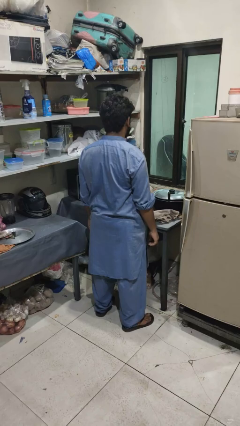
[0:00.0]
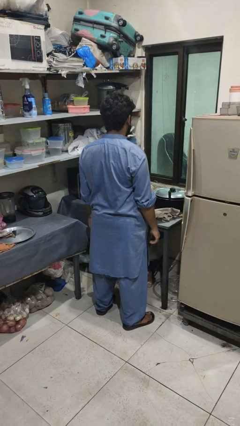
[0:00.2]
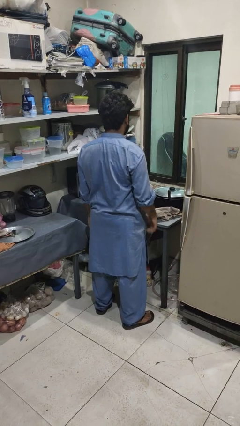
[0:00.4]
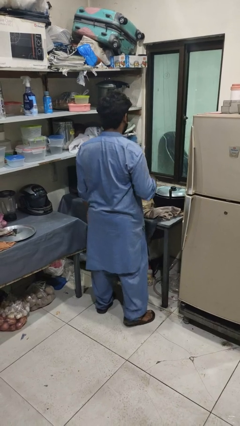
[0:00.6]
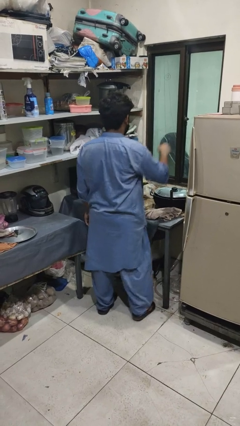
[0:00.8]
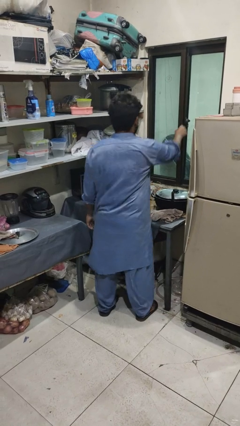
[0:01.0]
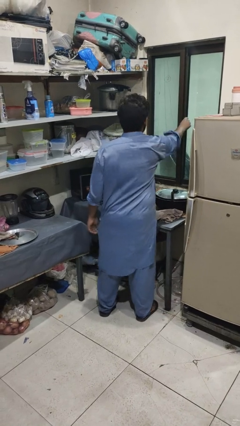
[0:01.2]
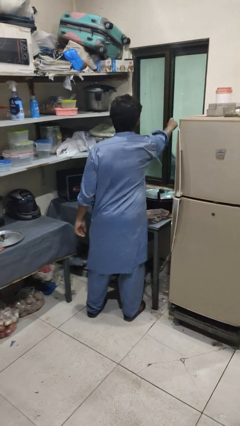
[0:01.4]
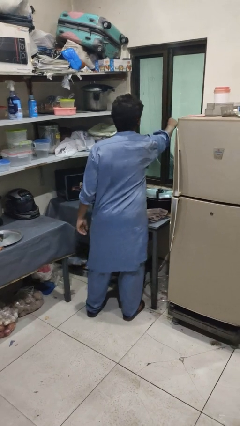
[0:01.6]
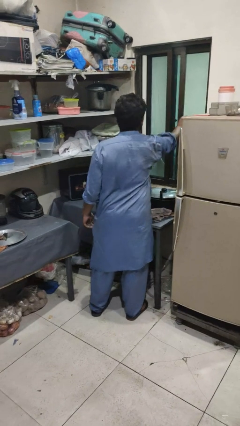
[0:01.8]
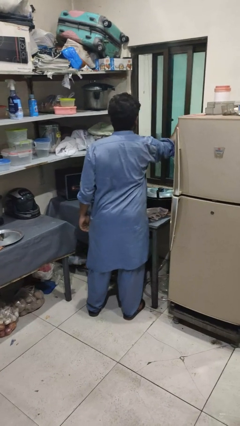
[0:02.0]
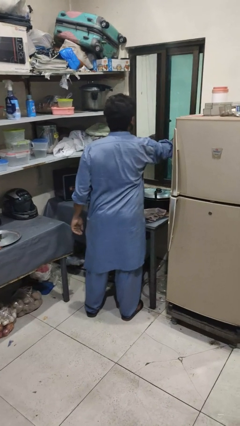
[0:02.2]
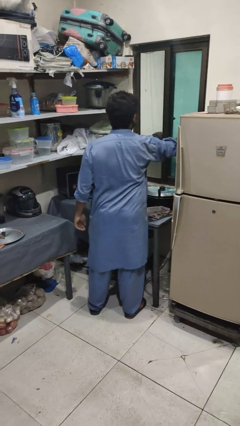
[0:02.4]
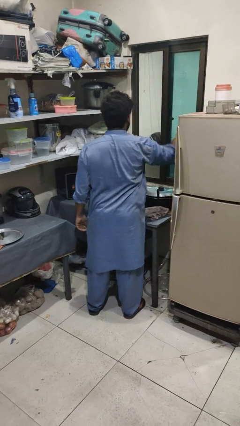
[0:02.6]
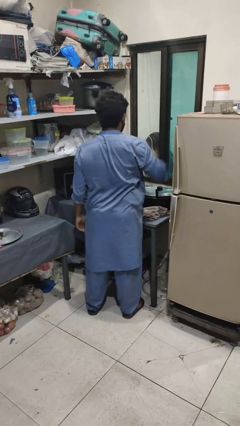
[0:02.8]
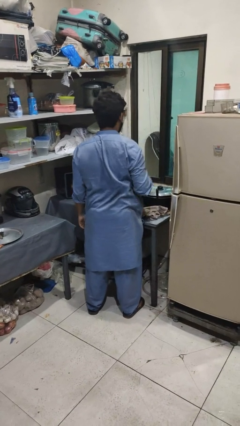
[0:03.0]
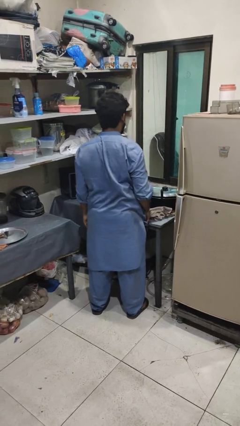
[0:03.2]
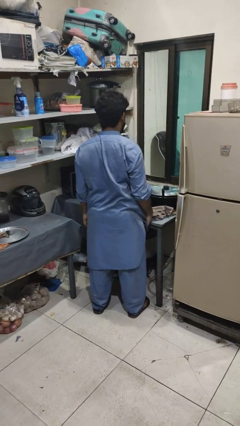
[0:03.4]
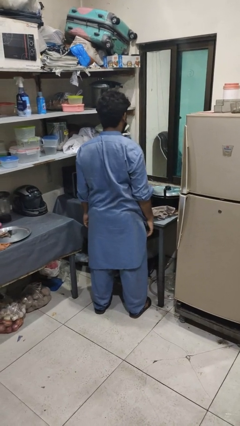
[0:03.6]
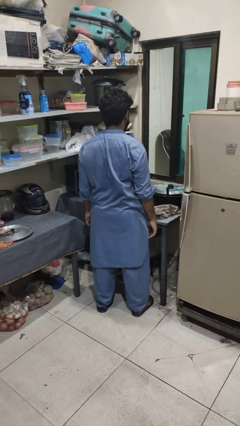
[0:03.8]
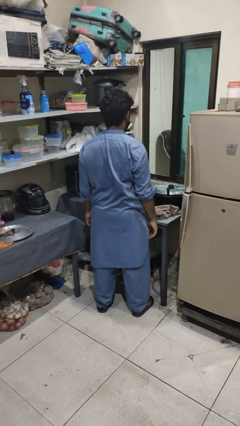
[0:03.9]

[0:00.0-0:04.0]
person opens home window

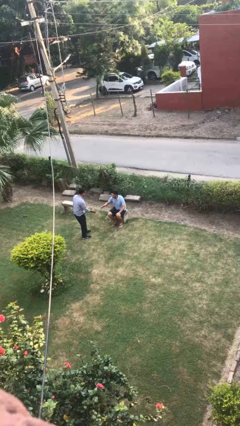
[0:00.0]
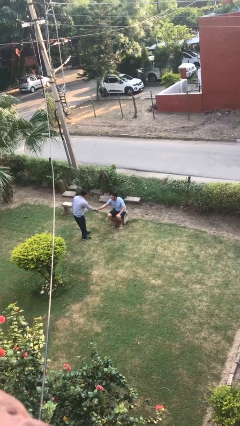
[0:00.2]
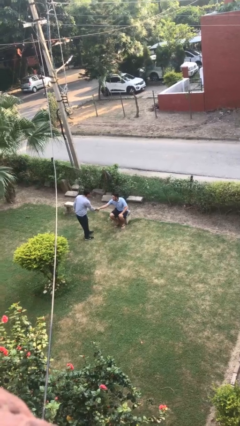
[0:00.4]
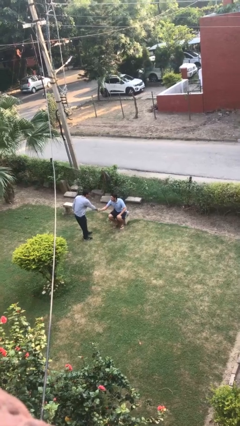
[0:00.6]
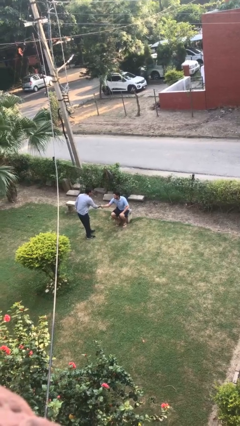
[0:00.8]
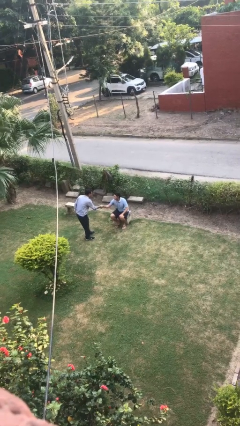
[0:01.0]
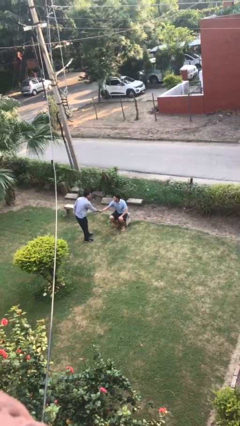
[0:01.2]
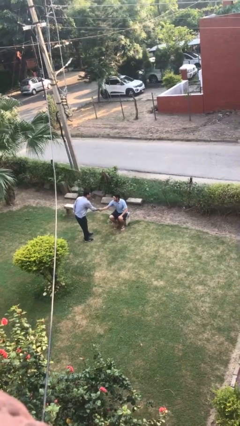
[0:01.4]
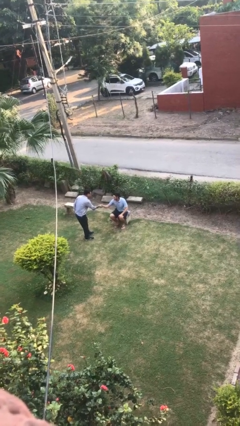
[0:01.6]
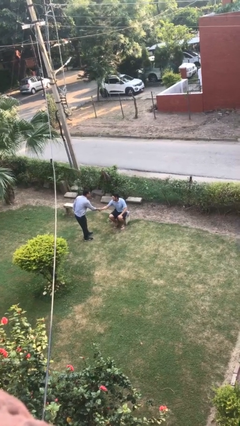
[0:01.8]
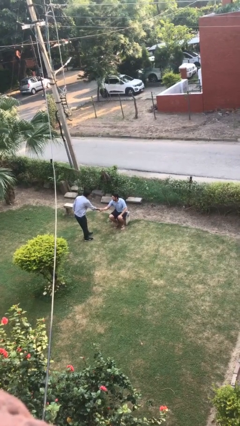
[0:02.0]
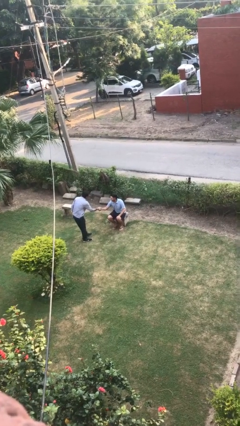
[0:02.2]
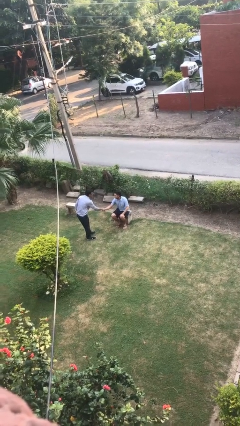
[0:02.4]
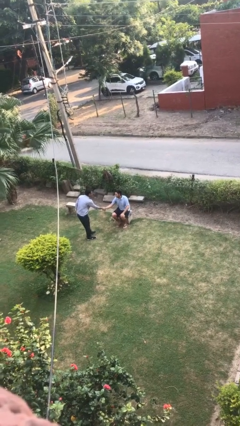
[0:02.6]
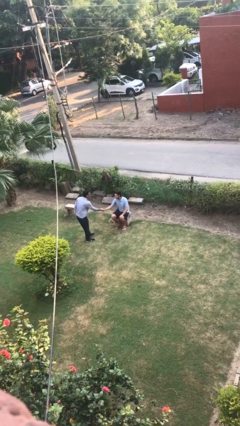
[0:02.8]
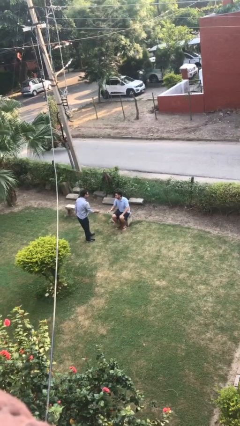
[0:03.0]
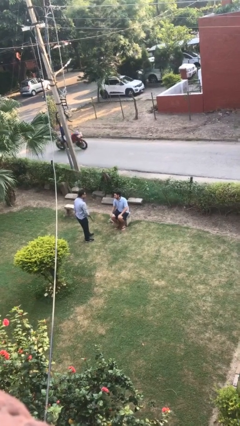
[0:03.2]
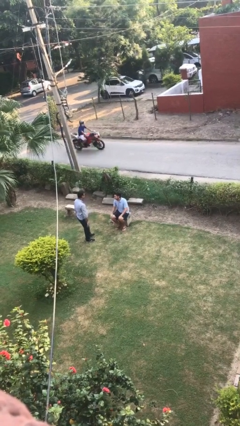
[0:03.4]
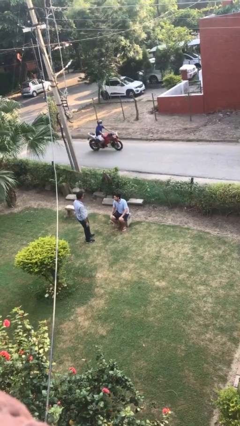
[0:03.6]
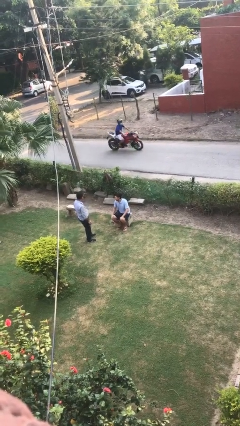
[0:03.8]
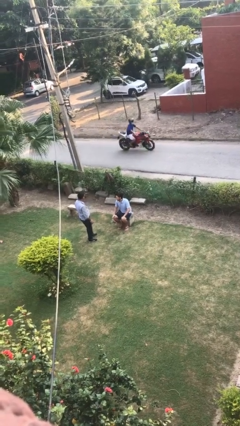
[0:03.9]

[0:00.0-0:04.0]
person shakes hand

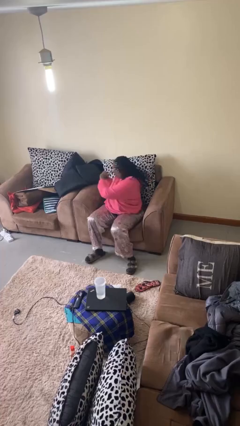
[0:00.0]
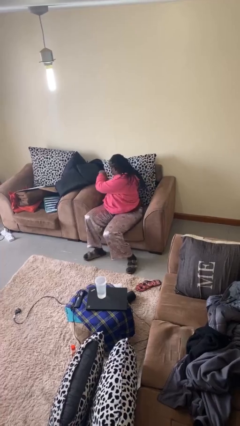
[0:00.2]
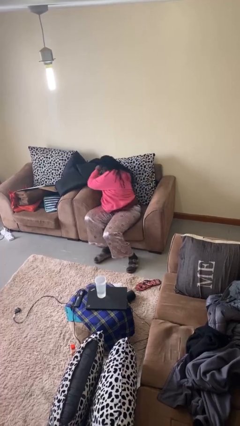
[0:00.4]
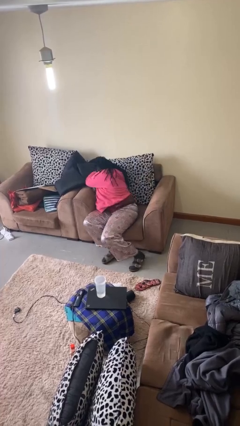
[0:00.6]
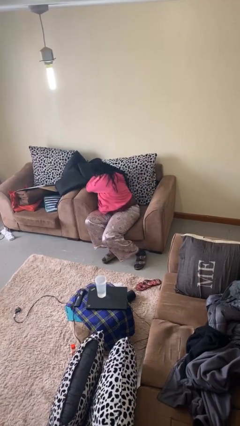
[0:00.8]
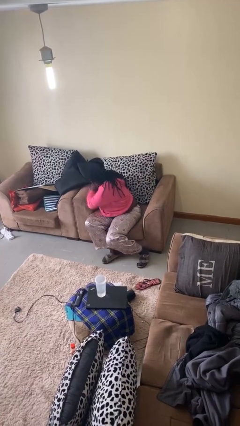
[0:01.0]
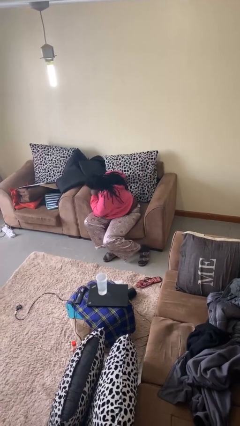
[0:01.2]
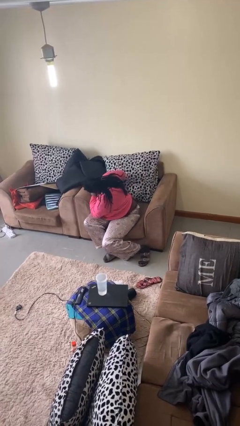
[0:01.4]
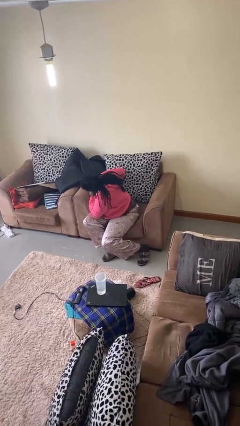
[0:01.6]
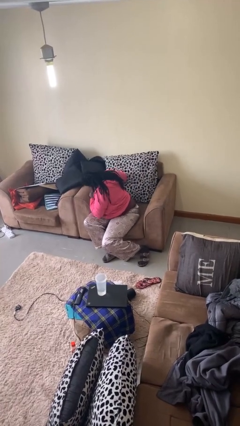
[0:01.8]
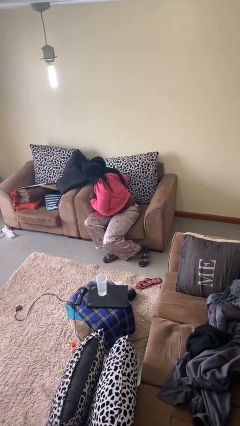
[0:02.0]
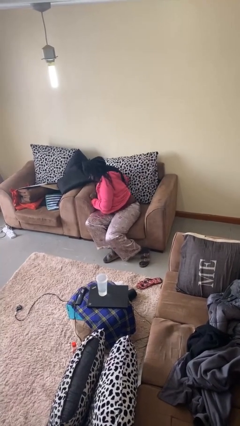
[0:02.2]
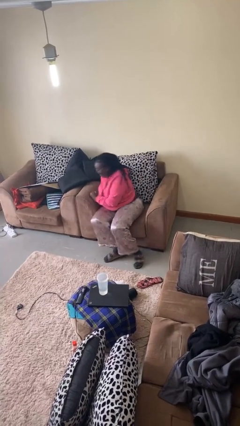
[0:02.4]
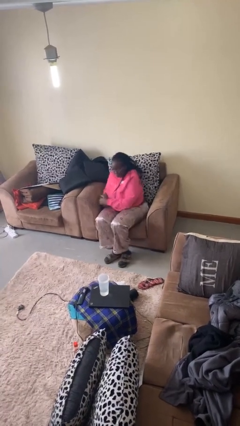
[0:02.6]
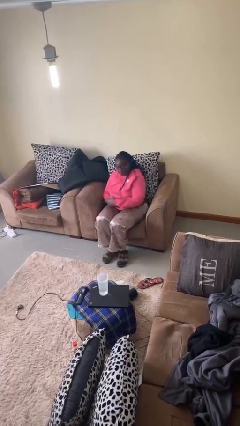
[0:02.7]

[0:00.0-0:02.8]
person searches in couch

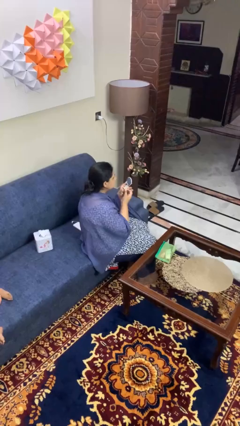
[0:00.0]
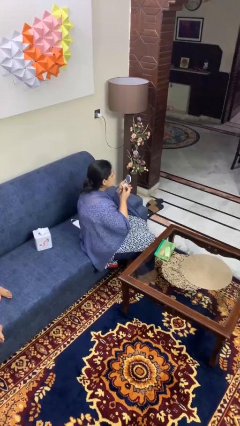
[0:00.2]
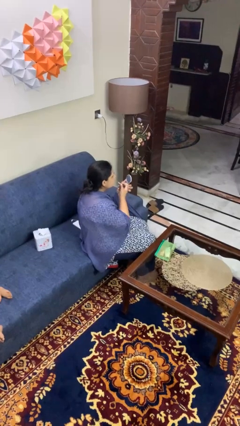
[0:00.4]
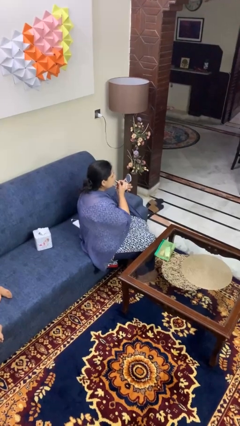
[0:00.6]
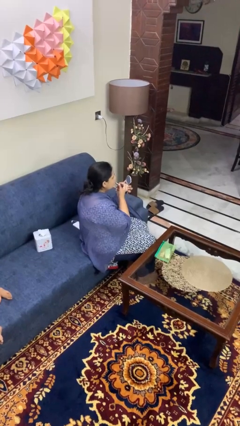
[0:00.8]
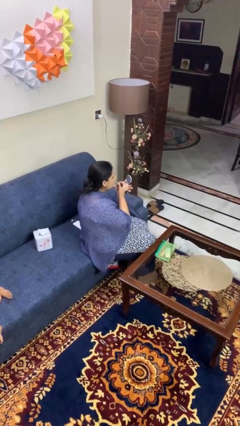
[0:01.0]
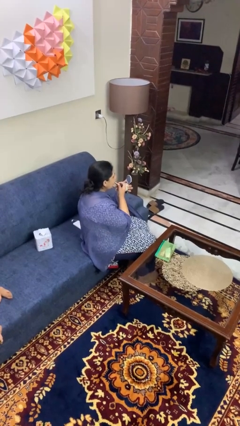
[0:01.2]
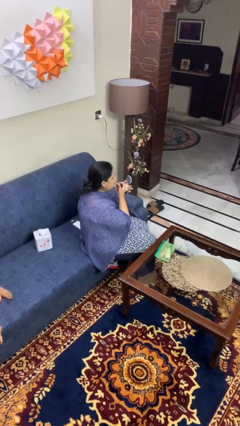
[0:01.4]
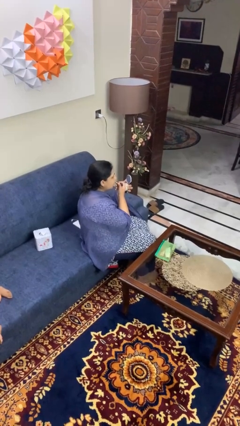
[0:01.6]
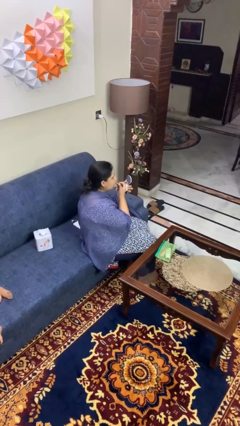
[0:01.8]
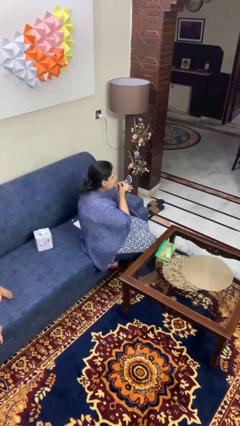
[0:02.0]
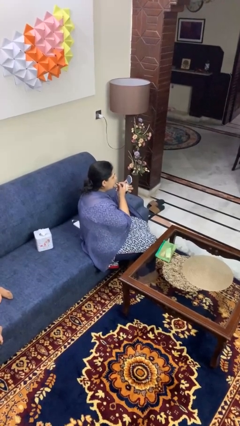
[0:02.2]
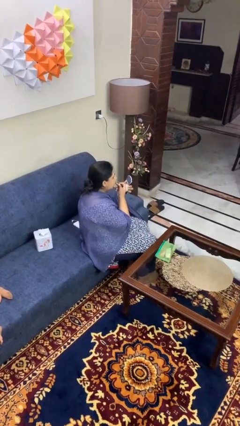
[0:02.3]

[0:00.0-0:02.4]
person applies lip makeup

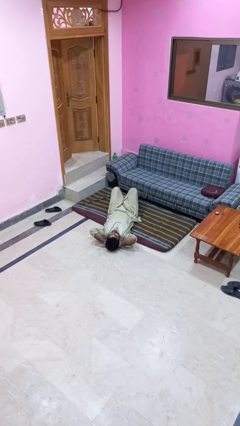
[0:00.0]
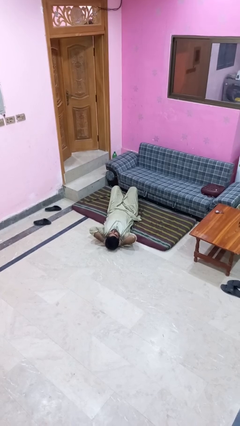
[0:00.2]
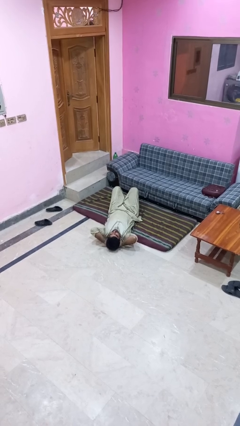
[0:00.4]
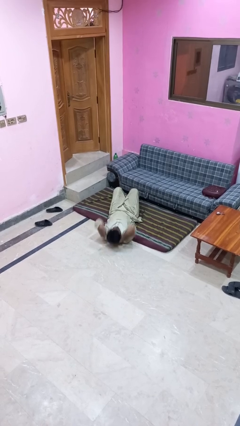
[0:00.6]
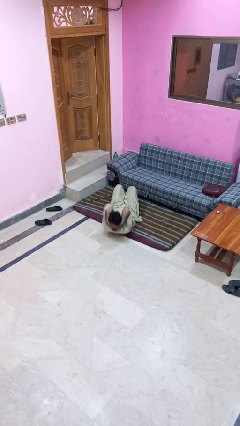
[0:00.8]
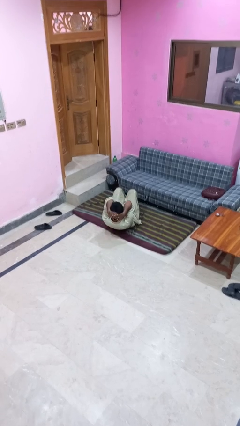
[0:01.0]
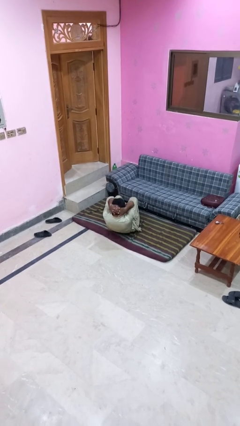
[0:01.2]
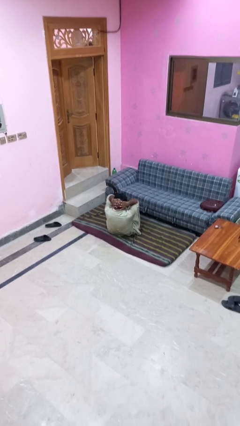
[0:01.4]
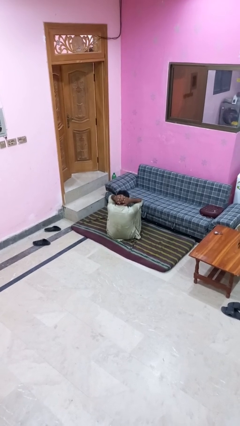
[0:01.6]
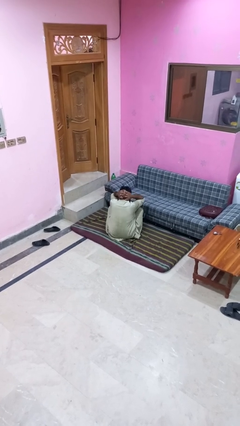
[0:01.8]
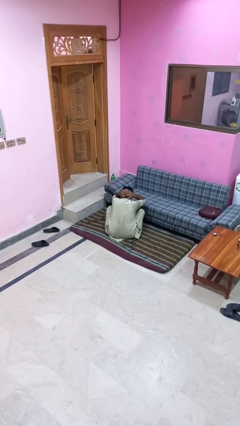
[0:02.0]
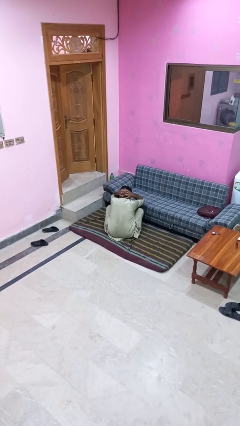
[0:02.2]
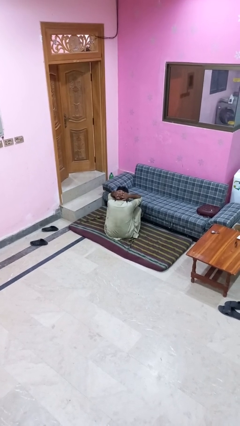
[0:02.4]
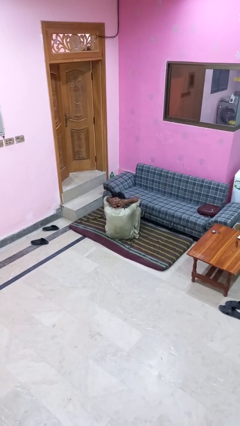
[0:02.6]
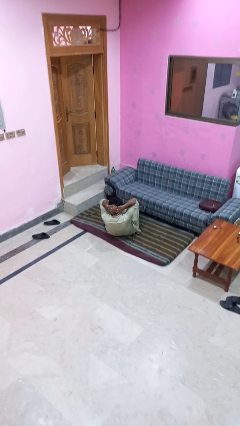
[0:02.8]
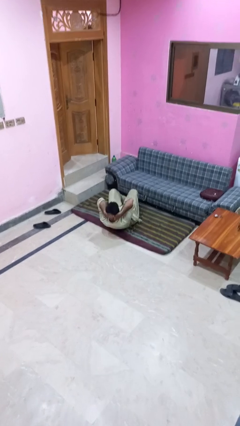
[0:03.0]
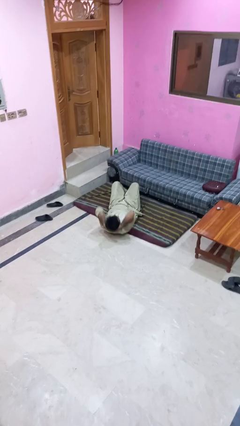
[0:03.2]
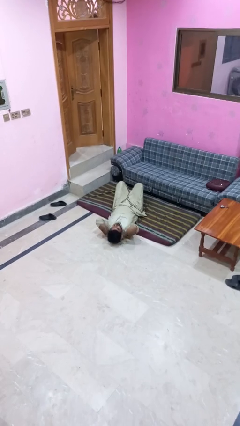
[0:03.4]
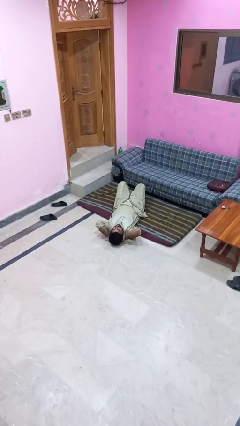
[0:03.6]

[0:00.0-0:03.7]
person exercises with situp

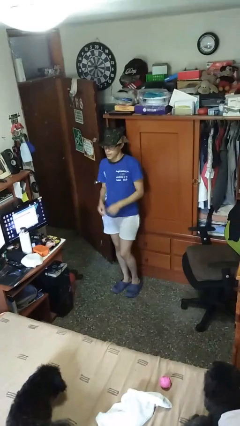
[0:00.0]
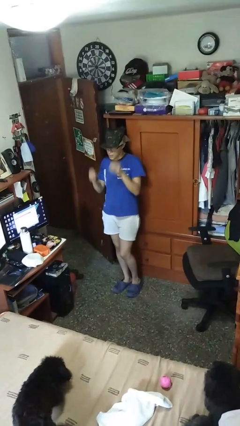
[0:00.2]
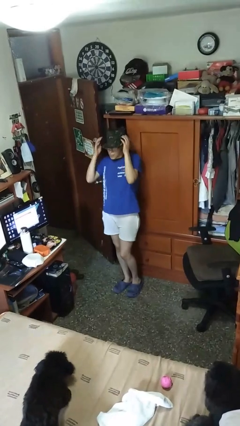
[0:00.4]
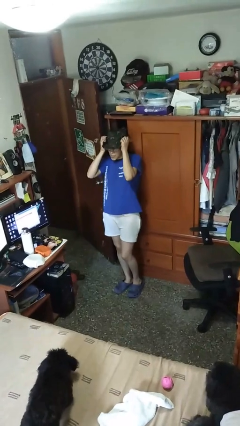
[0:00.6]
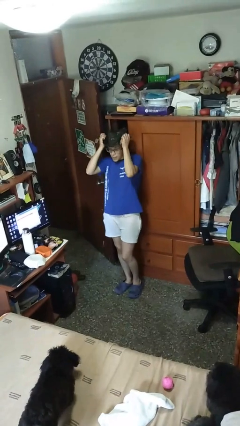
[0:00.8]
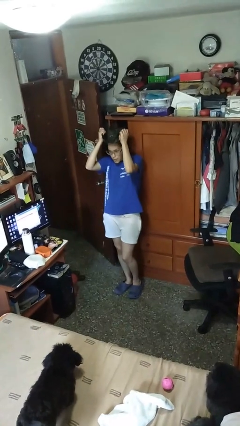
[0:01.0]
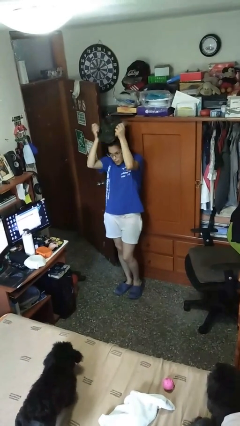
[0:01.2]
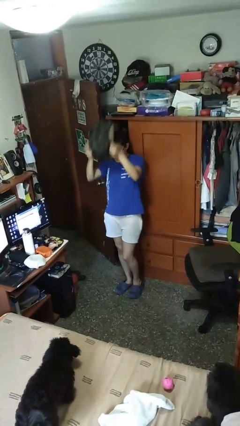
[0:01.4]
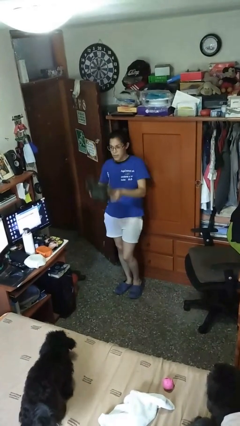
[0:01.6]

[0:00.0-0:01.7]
person takes off hat
